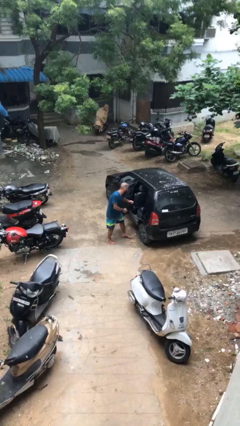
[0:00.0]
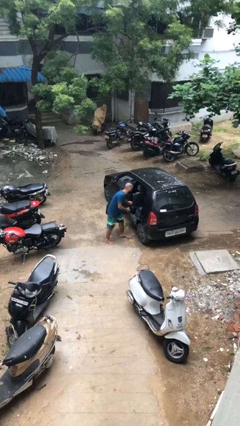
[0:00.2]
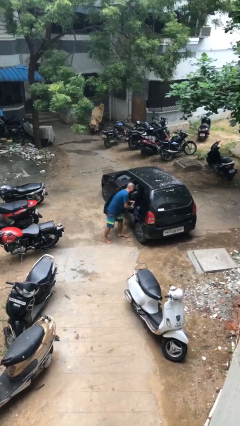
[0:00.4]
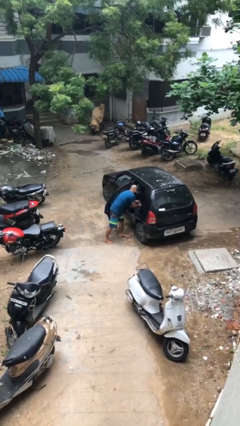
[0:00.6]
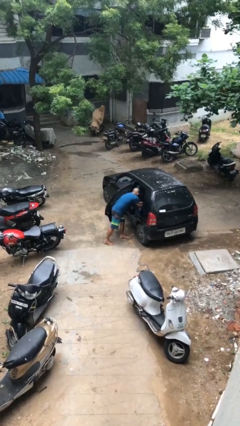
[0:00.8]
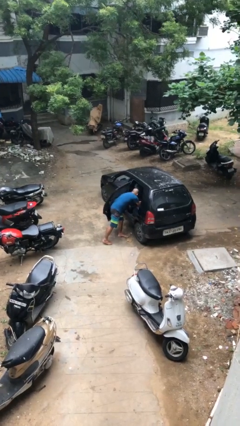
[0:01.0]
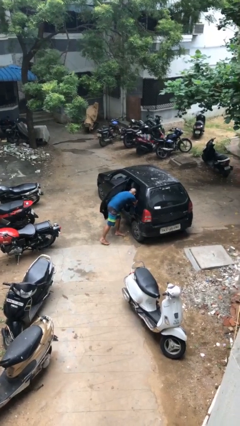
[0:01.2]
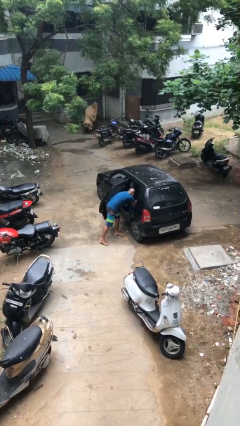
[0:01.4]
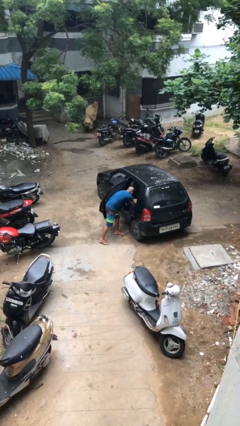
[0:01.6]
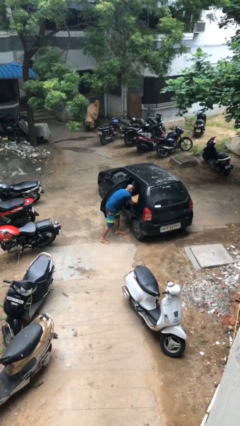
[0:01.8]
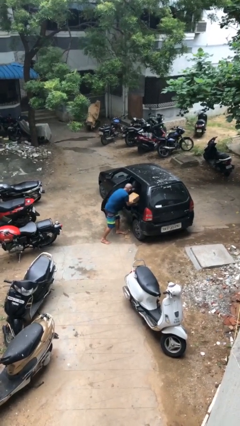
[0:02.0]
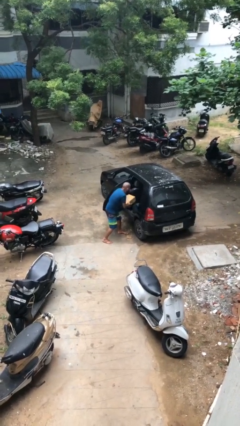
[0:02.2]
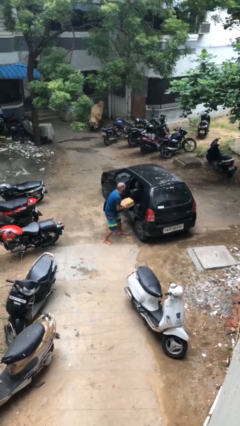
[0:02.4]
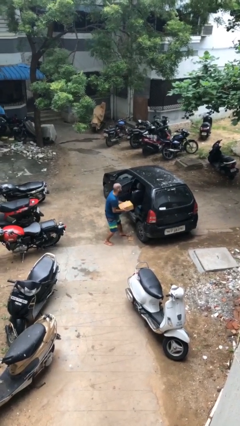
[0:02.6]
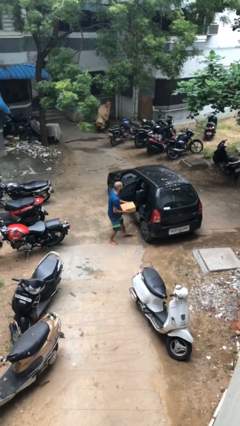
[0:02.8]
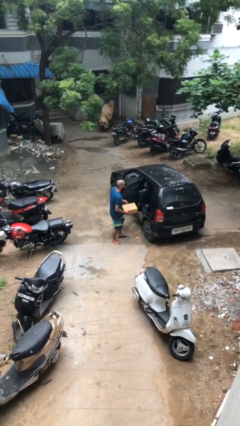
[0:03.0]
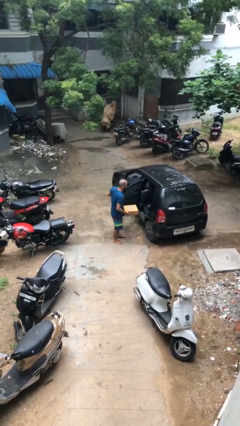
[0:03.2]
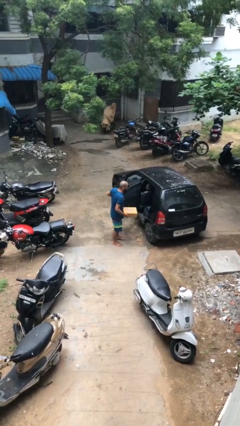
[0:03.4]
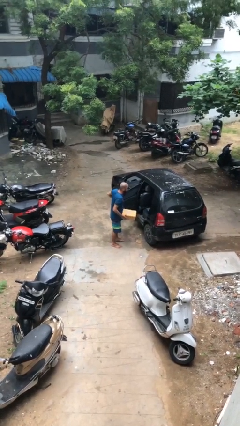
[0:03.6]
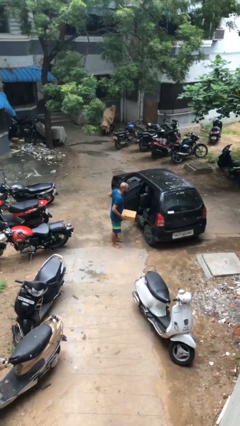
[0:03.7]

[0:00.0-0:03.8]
person unloads car

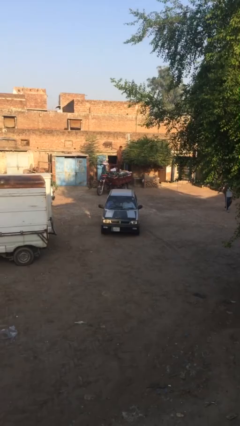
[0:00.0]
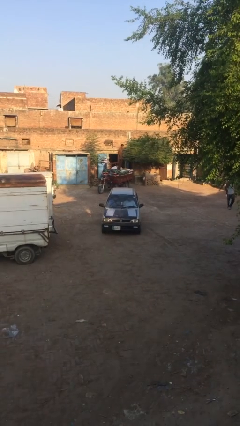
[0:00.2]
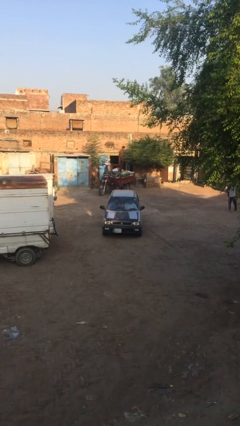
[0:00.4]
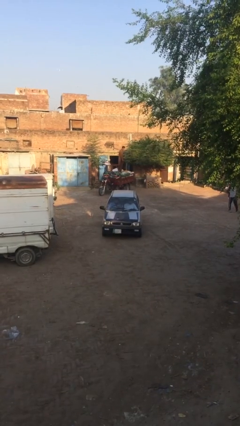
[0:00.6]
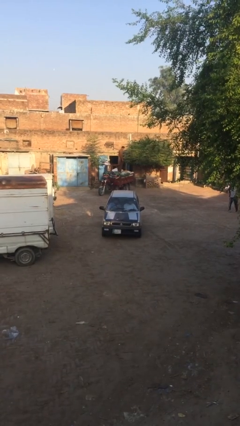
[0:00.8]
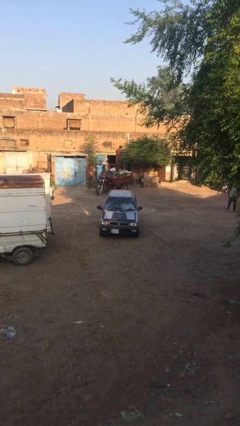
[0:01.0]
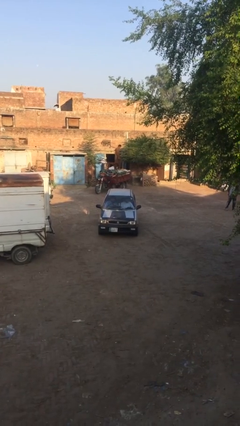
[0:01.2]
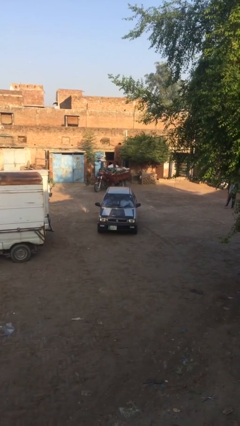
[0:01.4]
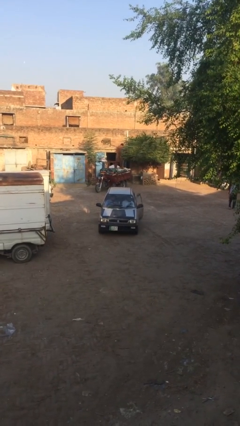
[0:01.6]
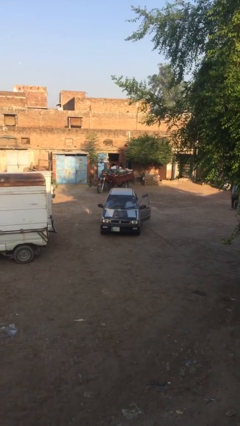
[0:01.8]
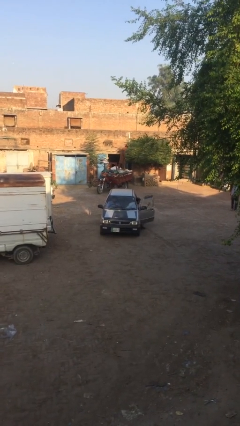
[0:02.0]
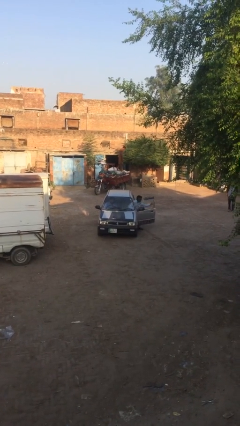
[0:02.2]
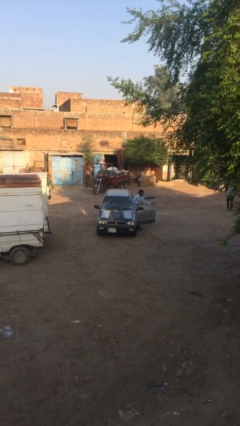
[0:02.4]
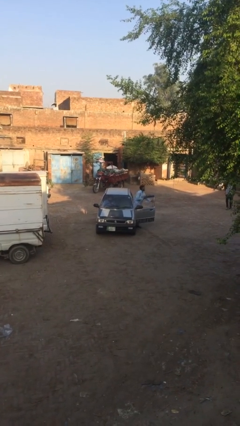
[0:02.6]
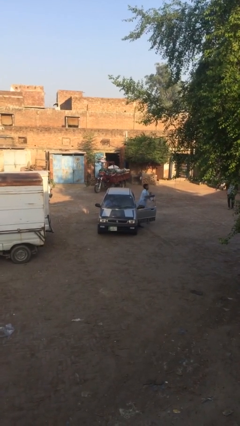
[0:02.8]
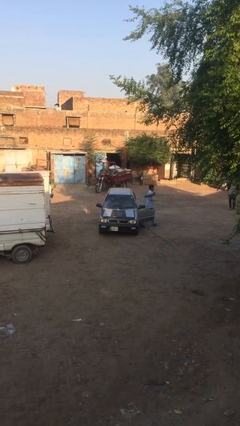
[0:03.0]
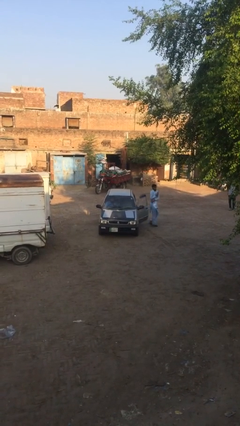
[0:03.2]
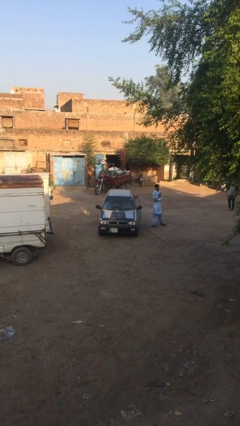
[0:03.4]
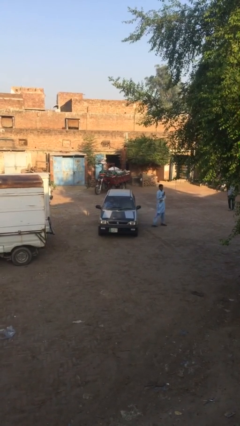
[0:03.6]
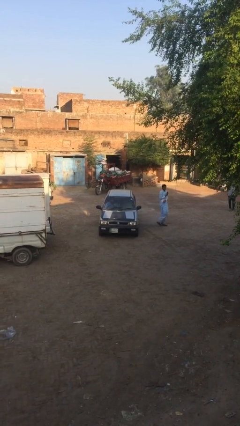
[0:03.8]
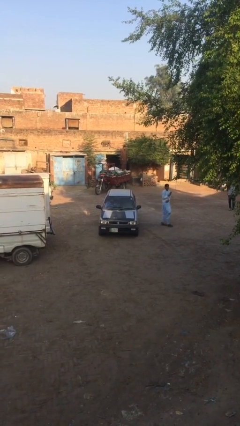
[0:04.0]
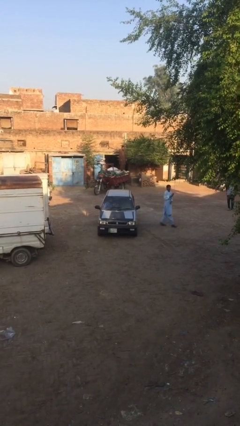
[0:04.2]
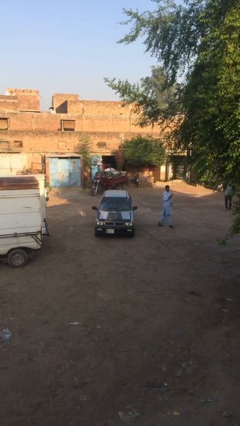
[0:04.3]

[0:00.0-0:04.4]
car drops off person

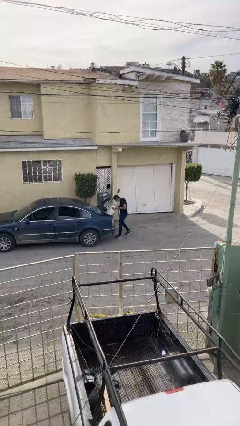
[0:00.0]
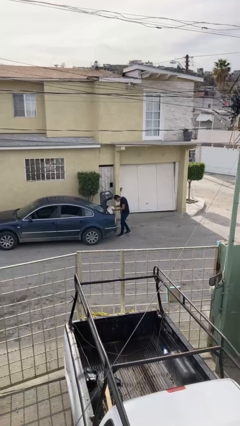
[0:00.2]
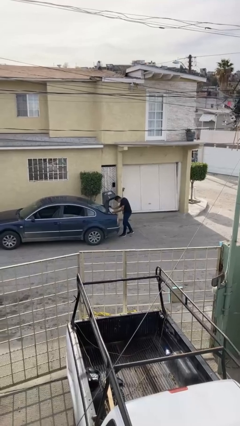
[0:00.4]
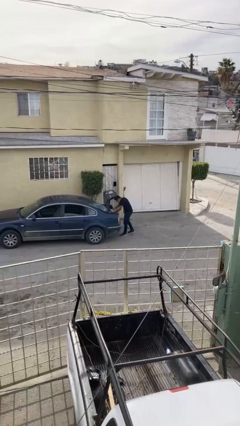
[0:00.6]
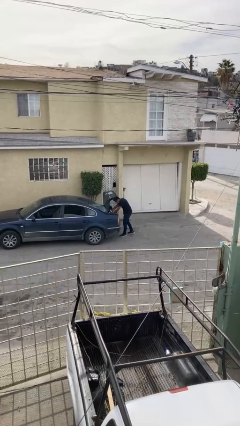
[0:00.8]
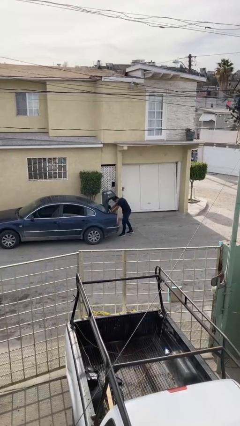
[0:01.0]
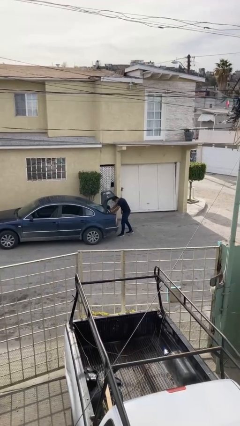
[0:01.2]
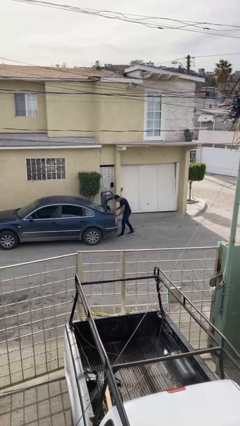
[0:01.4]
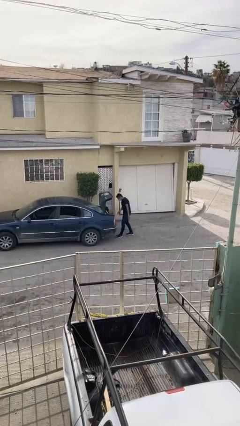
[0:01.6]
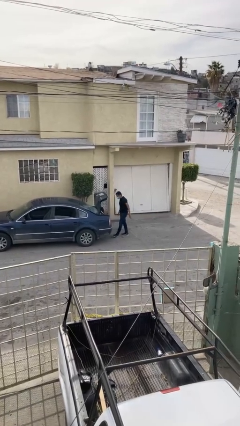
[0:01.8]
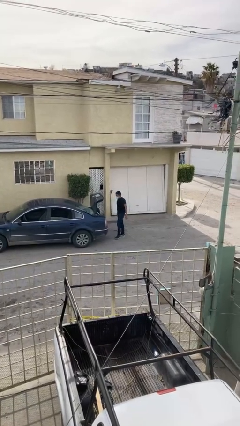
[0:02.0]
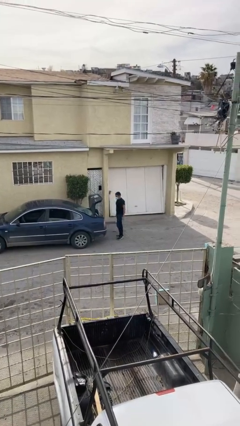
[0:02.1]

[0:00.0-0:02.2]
person loads car

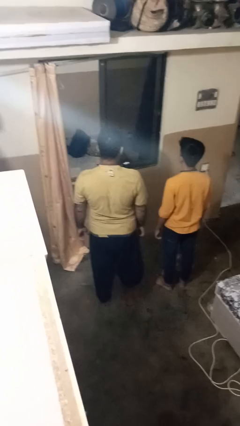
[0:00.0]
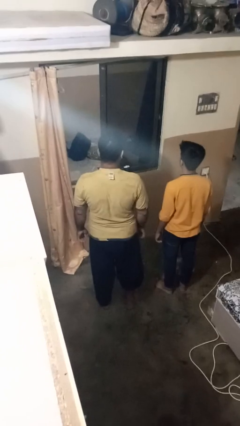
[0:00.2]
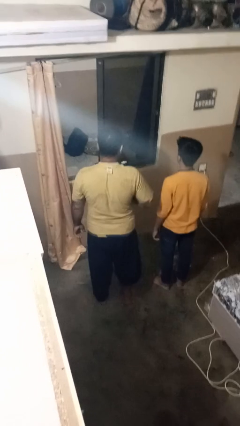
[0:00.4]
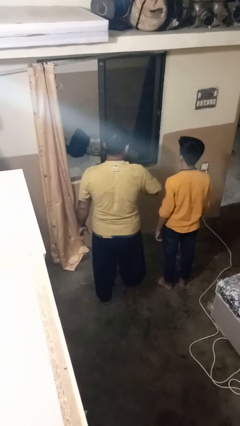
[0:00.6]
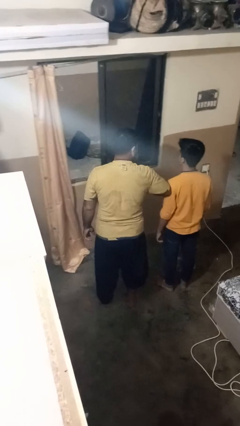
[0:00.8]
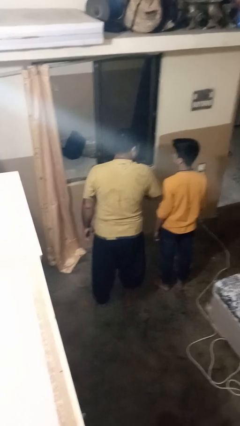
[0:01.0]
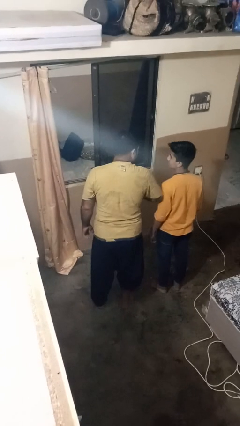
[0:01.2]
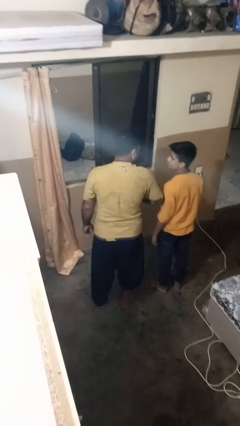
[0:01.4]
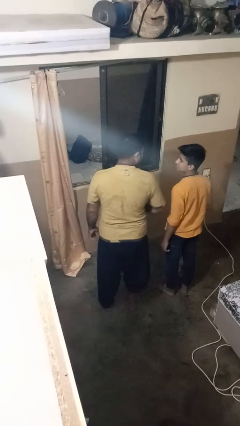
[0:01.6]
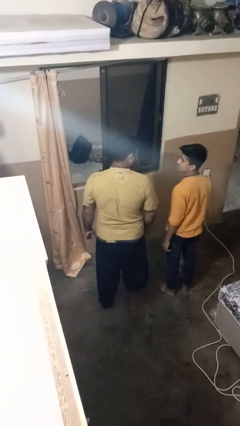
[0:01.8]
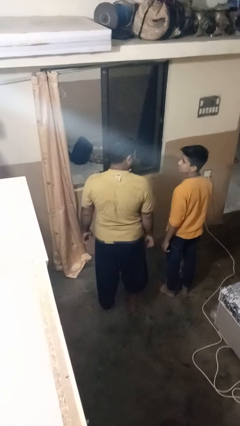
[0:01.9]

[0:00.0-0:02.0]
person nudges person with elbow

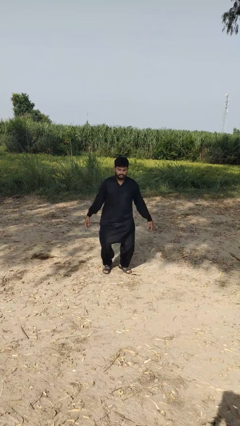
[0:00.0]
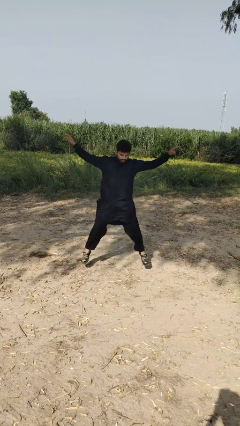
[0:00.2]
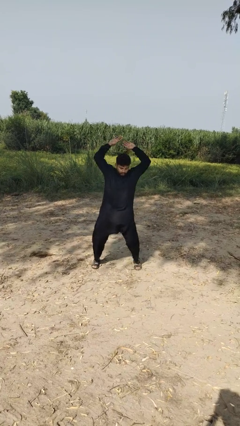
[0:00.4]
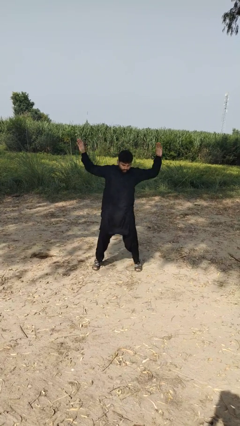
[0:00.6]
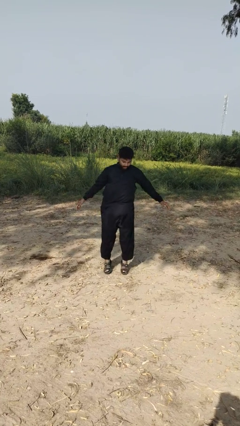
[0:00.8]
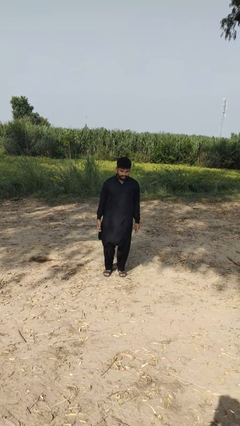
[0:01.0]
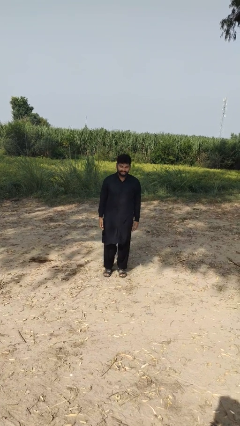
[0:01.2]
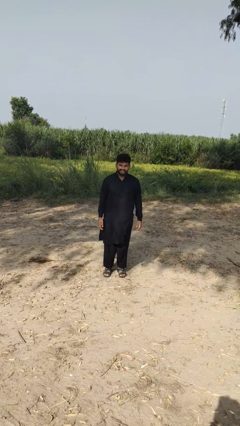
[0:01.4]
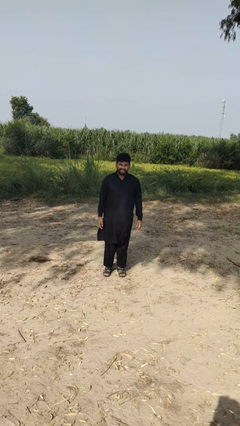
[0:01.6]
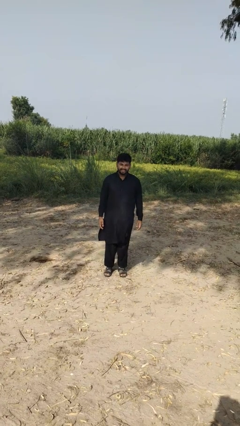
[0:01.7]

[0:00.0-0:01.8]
person exercises with jumping jacks

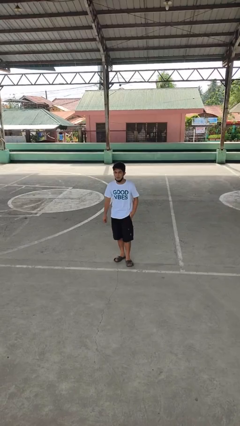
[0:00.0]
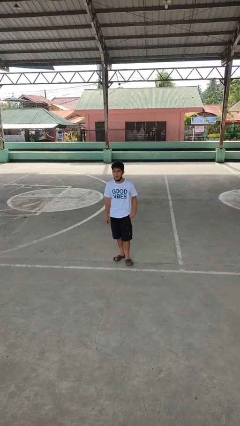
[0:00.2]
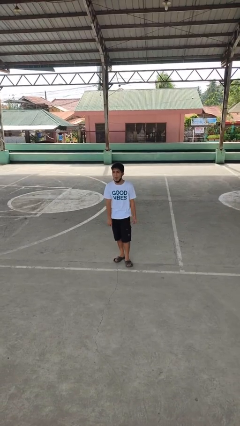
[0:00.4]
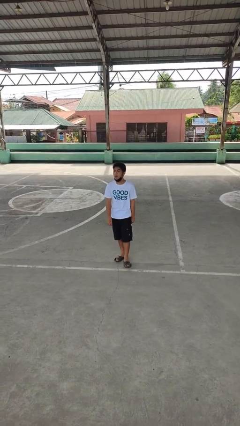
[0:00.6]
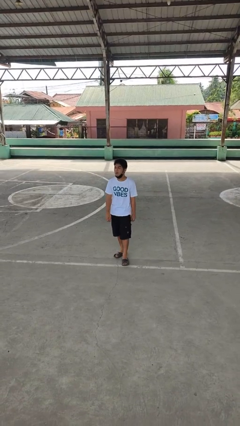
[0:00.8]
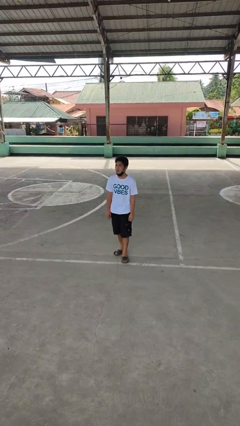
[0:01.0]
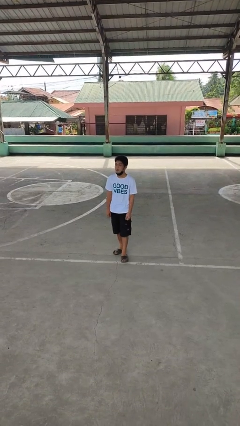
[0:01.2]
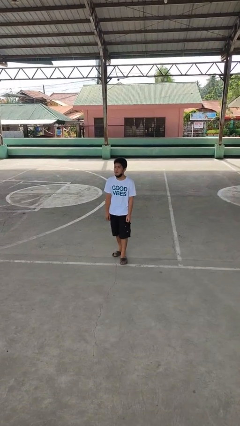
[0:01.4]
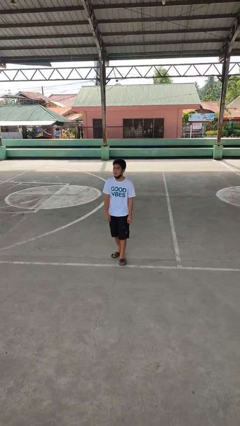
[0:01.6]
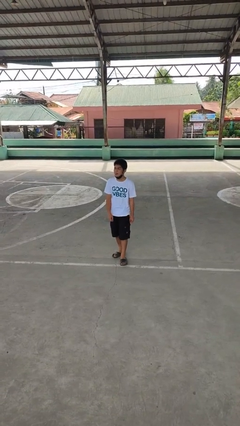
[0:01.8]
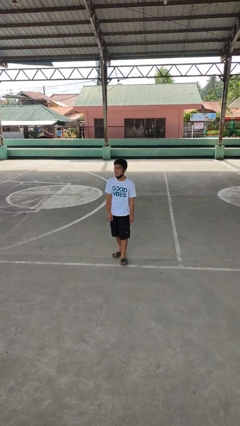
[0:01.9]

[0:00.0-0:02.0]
person sticks out tongue

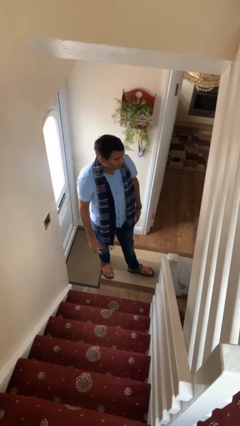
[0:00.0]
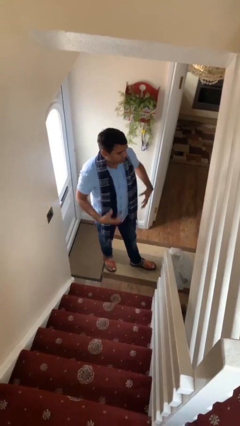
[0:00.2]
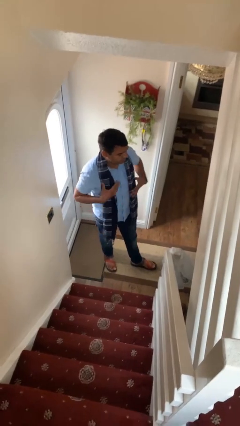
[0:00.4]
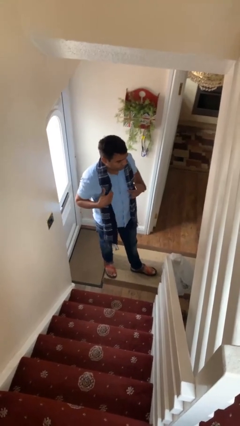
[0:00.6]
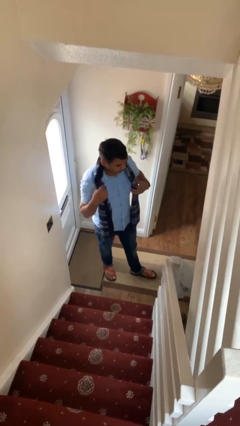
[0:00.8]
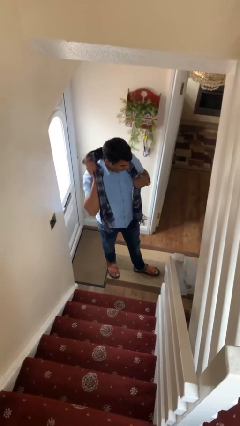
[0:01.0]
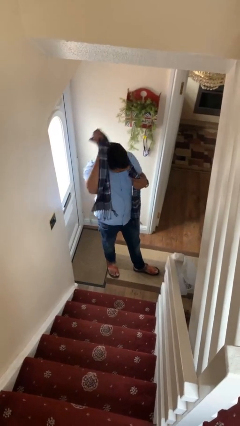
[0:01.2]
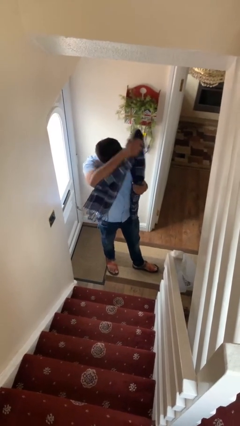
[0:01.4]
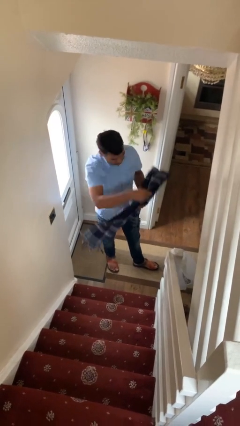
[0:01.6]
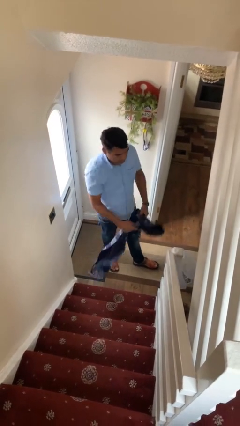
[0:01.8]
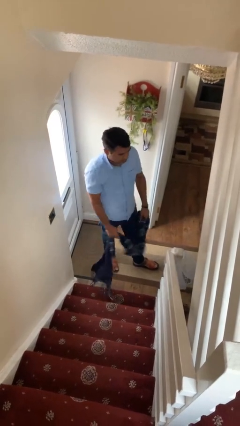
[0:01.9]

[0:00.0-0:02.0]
person takes off scarf
